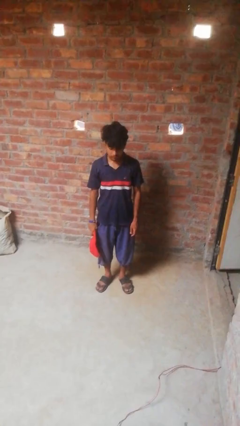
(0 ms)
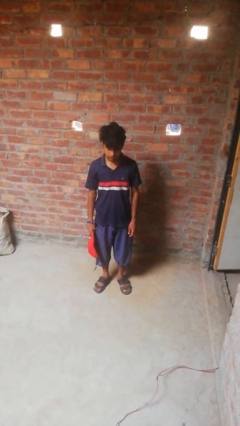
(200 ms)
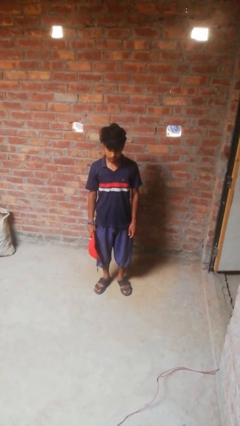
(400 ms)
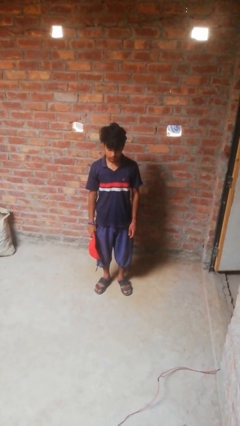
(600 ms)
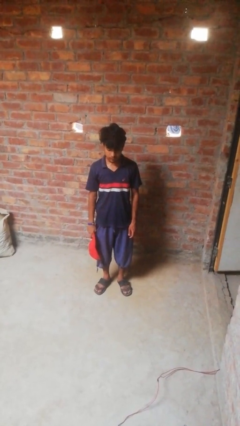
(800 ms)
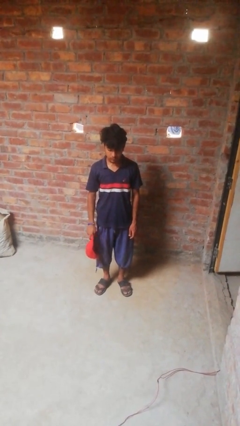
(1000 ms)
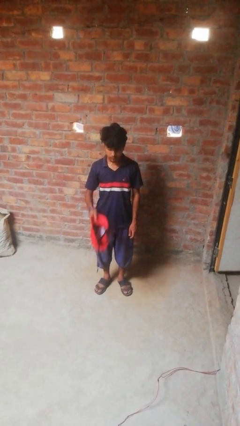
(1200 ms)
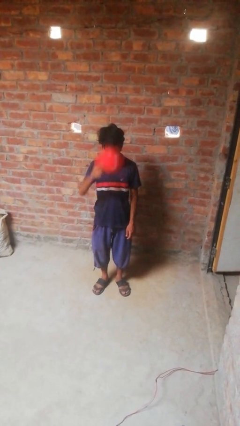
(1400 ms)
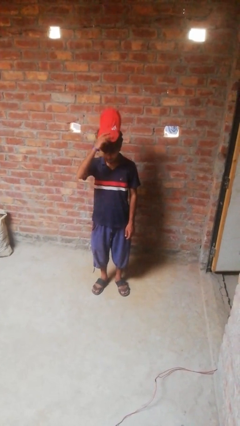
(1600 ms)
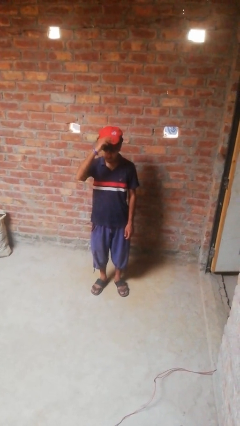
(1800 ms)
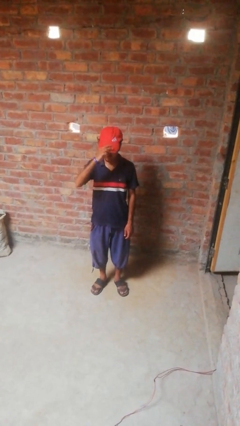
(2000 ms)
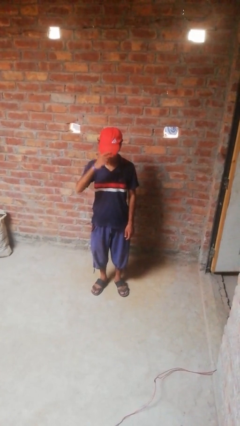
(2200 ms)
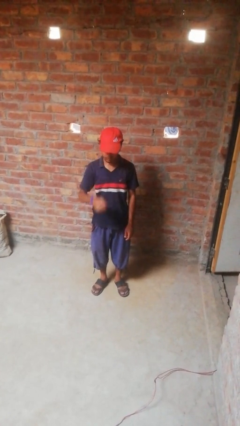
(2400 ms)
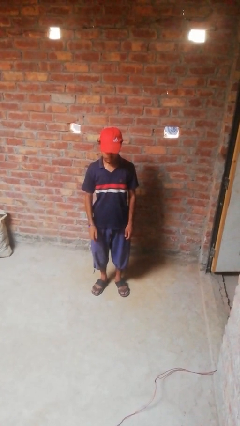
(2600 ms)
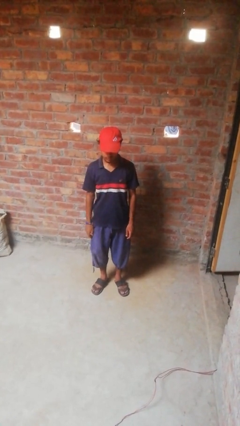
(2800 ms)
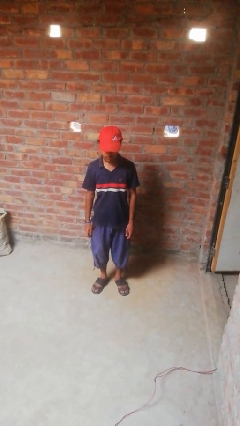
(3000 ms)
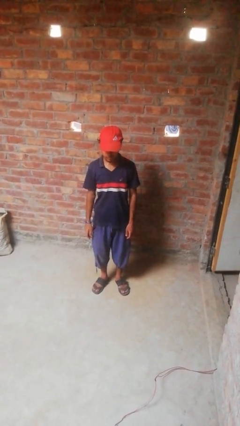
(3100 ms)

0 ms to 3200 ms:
person puts on hat

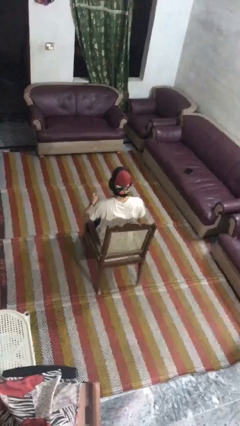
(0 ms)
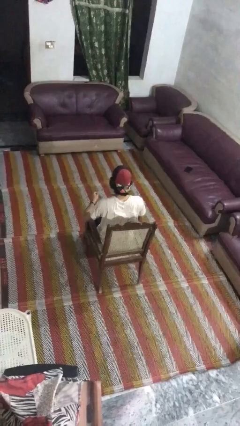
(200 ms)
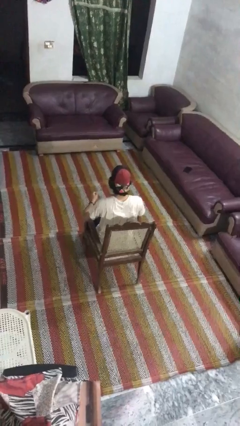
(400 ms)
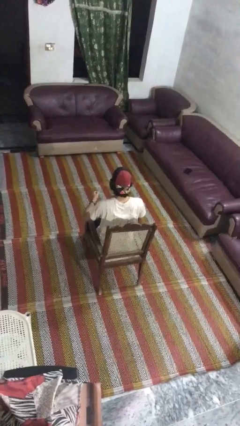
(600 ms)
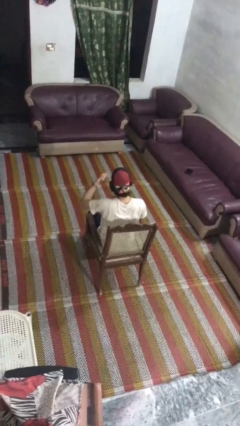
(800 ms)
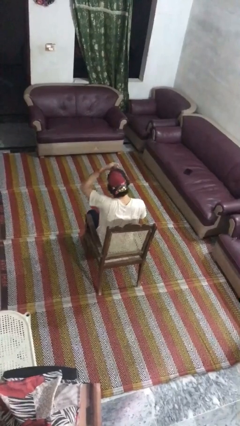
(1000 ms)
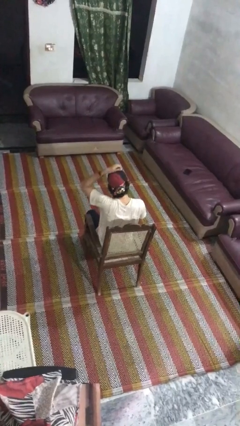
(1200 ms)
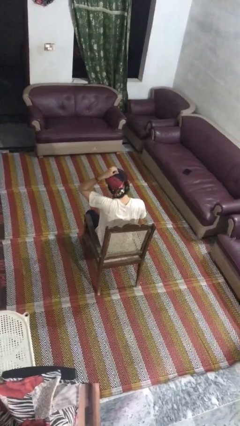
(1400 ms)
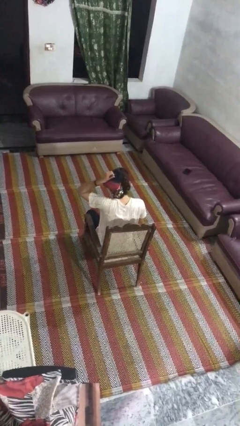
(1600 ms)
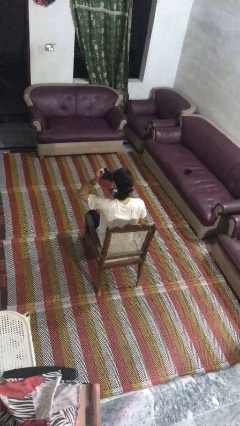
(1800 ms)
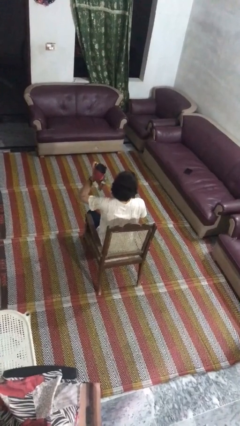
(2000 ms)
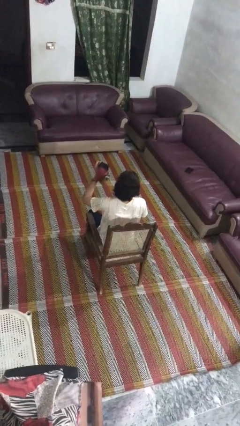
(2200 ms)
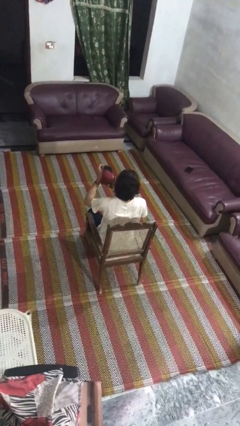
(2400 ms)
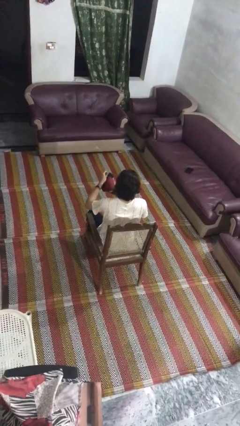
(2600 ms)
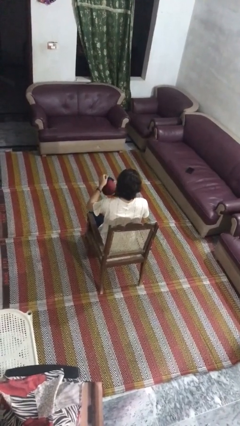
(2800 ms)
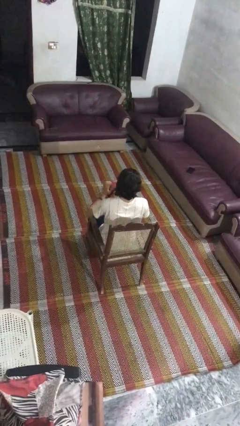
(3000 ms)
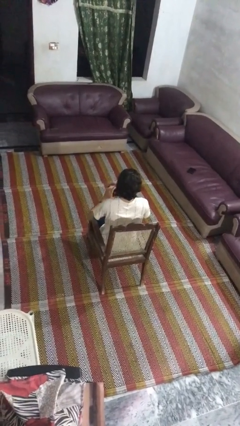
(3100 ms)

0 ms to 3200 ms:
person takes off hat

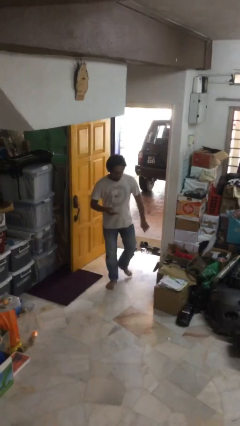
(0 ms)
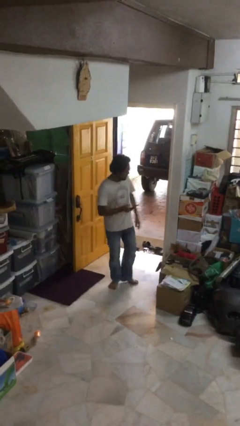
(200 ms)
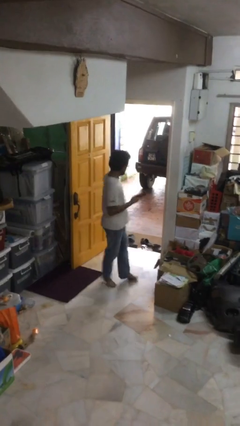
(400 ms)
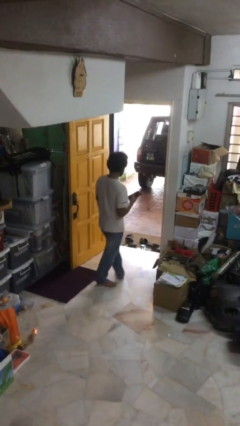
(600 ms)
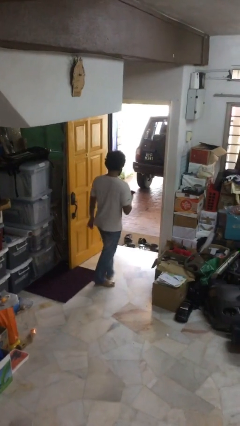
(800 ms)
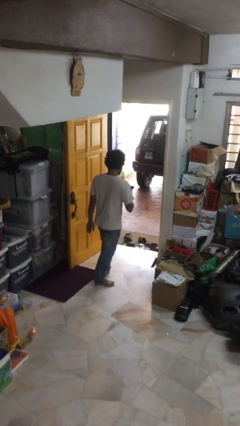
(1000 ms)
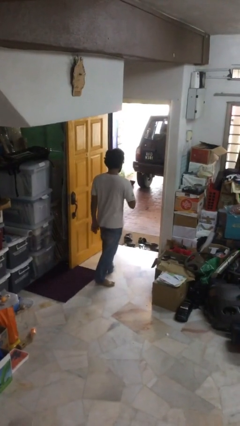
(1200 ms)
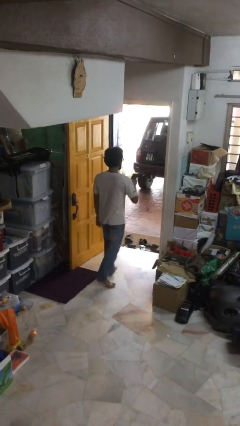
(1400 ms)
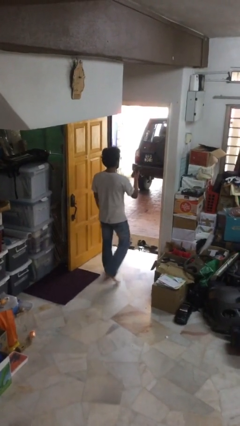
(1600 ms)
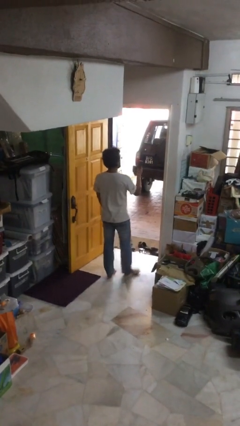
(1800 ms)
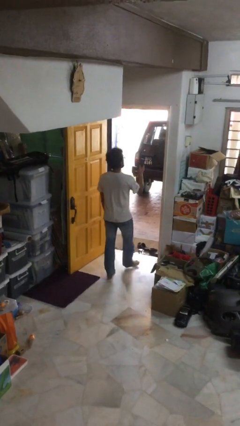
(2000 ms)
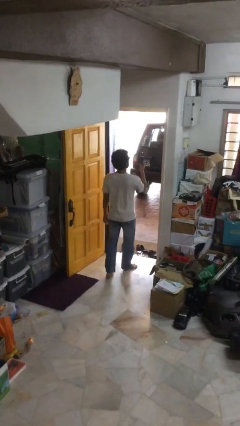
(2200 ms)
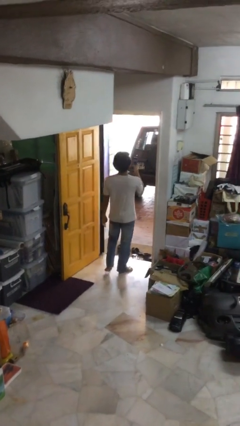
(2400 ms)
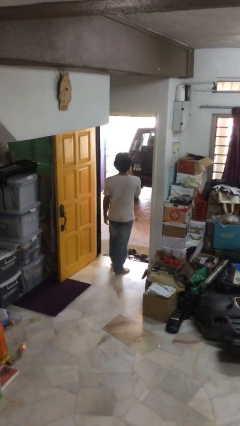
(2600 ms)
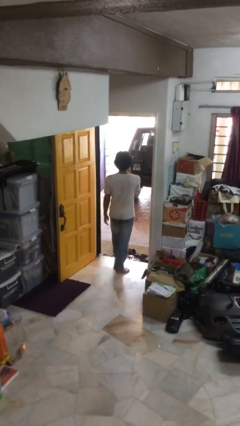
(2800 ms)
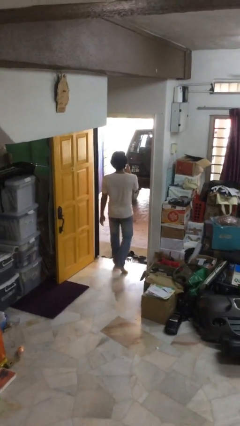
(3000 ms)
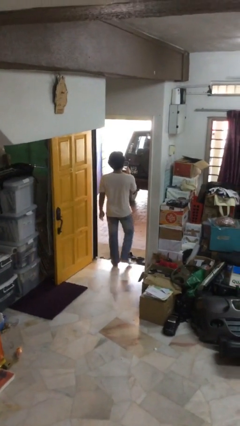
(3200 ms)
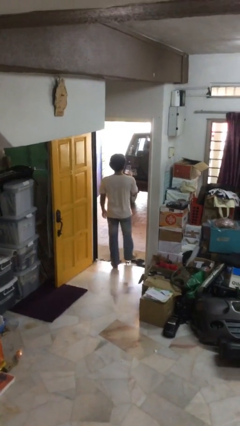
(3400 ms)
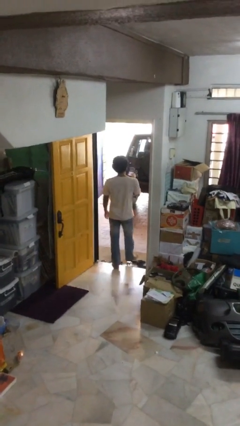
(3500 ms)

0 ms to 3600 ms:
person exits scene through structure

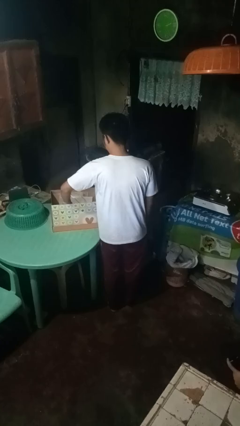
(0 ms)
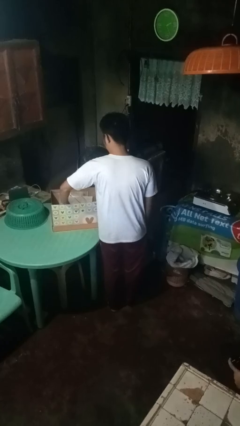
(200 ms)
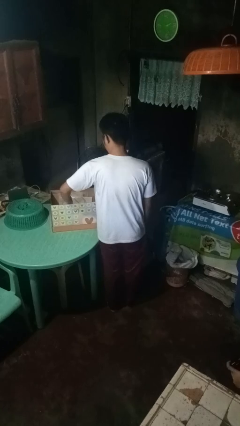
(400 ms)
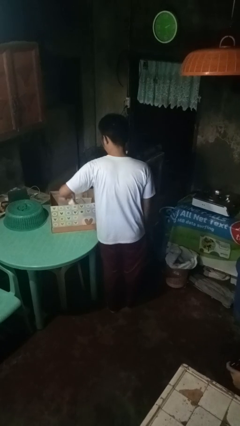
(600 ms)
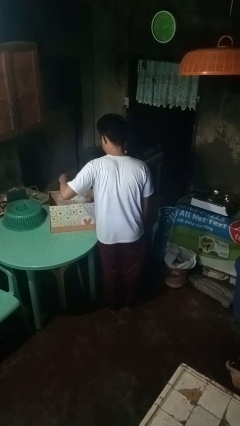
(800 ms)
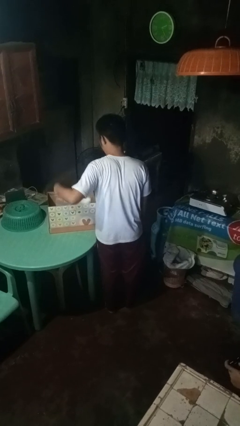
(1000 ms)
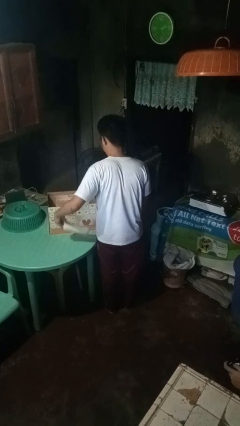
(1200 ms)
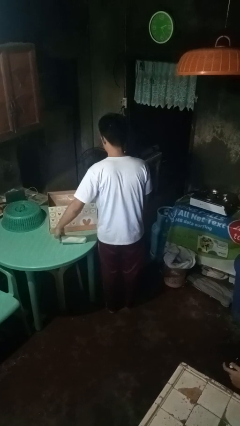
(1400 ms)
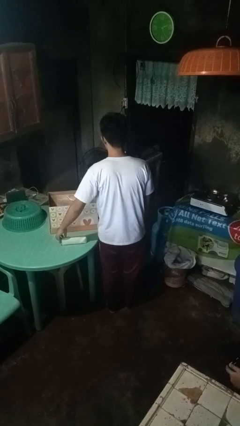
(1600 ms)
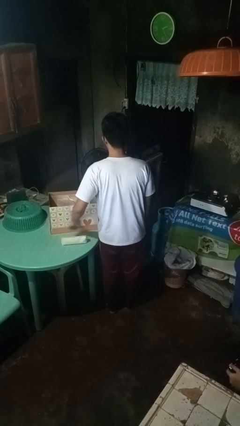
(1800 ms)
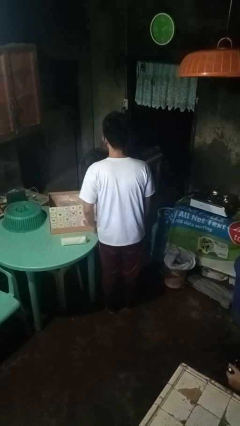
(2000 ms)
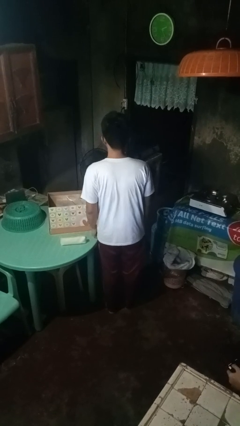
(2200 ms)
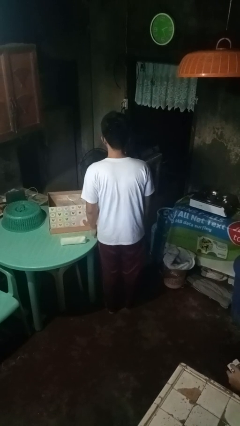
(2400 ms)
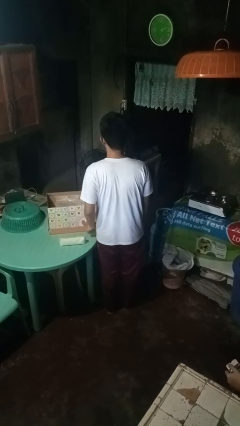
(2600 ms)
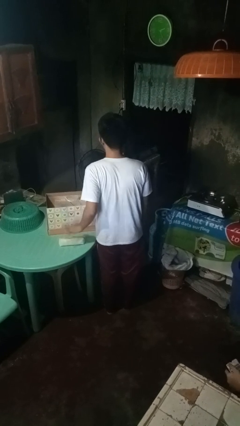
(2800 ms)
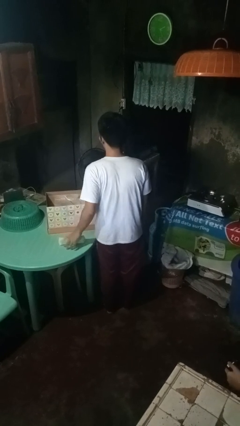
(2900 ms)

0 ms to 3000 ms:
person takes object from box

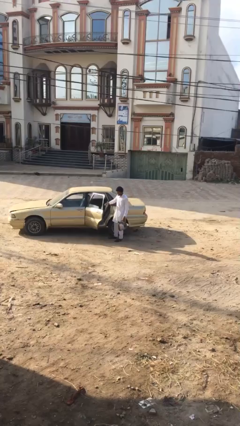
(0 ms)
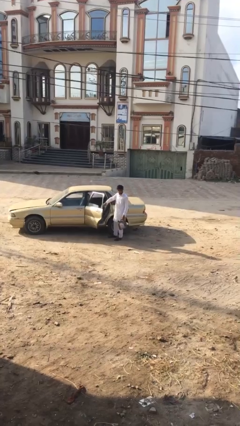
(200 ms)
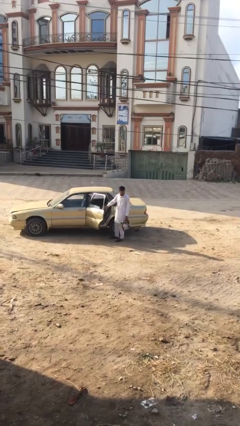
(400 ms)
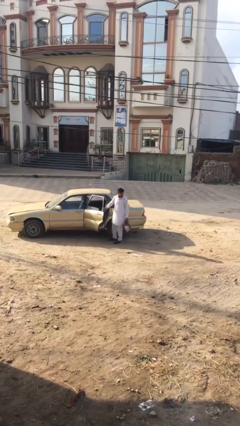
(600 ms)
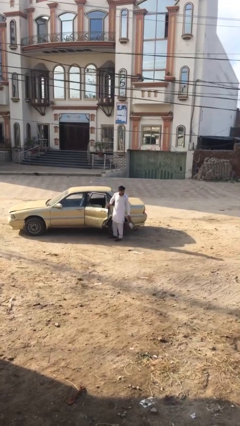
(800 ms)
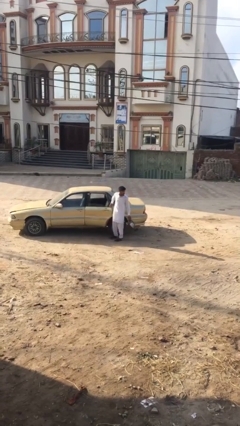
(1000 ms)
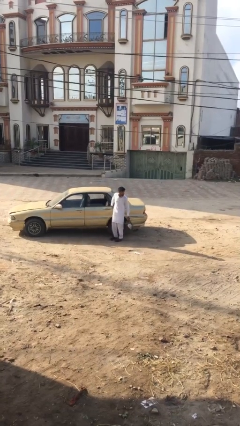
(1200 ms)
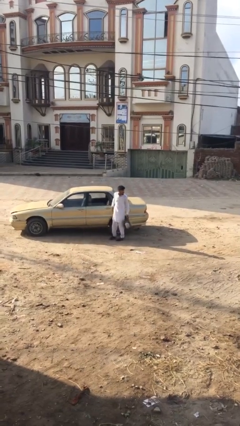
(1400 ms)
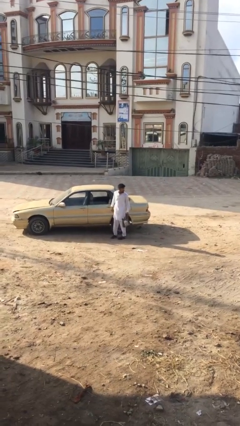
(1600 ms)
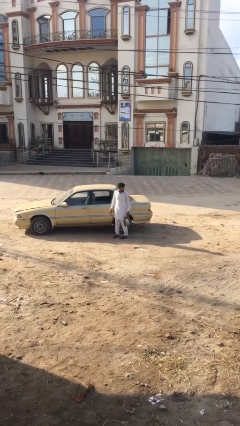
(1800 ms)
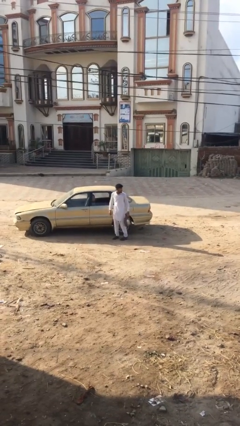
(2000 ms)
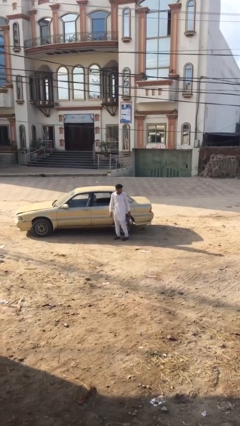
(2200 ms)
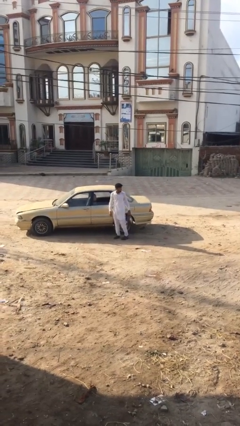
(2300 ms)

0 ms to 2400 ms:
person closes car door

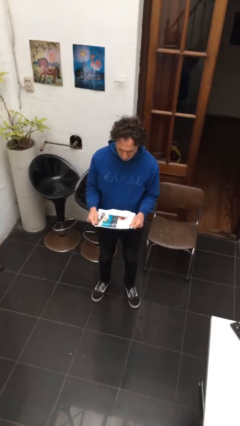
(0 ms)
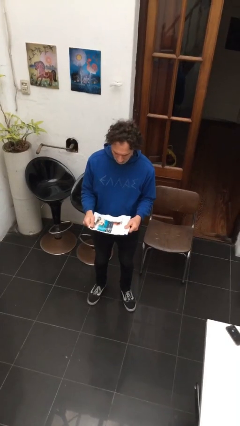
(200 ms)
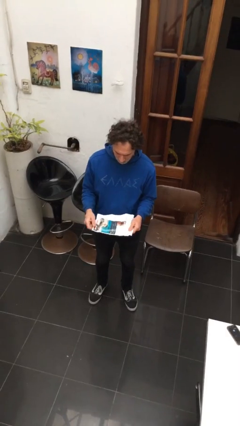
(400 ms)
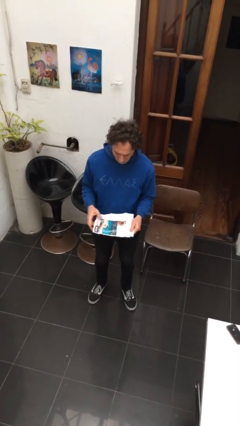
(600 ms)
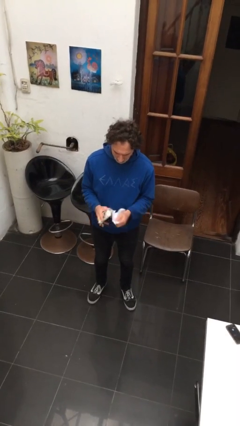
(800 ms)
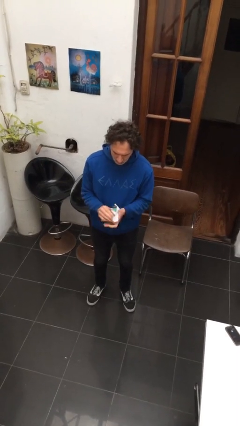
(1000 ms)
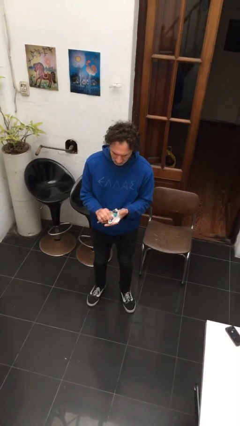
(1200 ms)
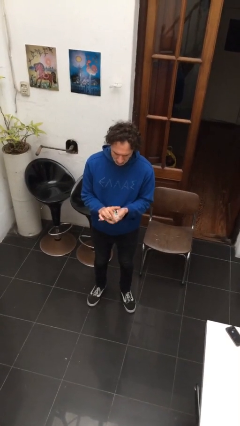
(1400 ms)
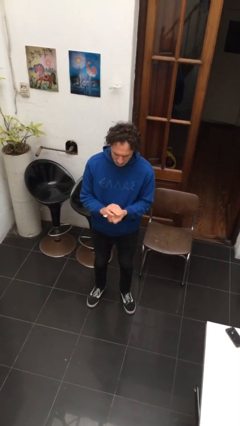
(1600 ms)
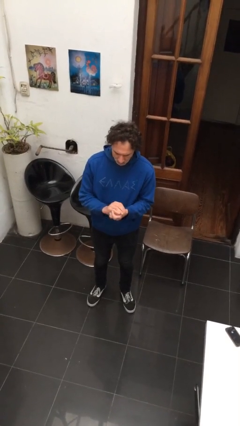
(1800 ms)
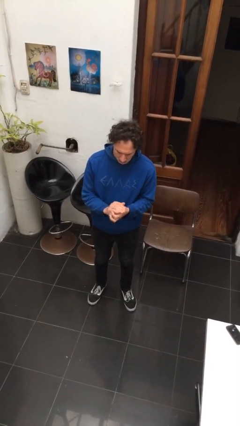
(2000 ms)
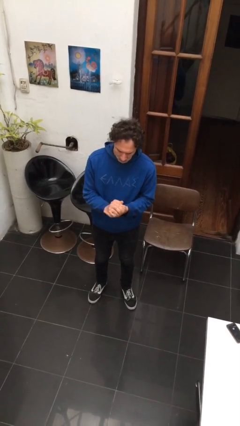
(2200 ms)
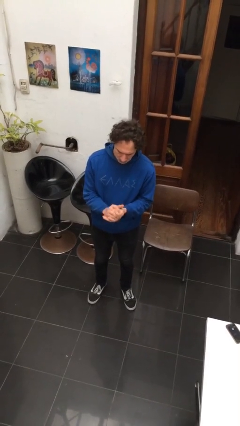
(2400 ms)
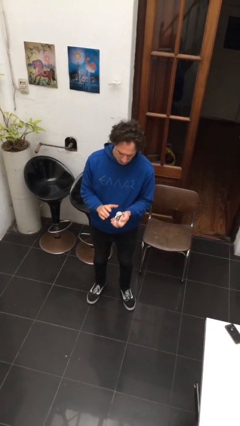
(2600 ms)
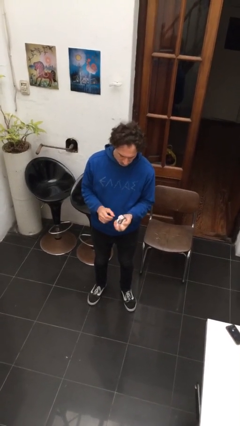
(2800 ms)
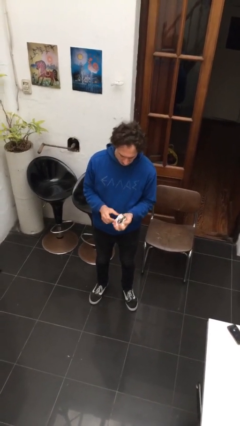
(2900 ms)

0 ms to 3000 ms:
person crumples paper
